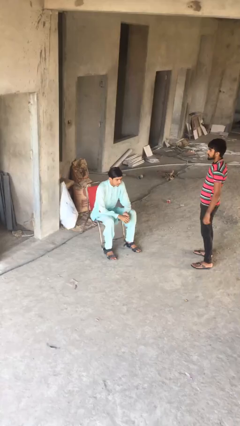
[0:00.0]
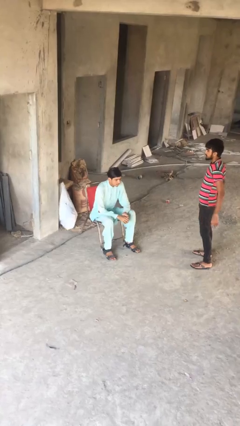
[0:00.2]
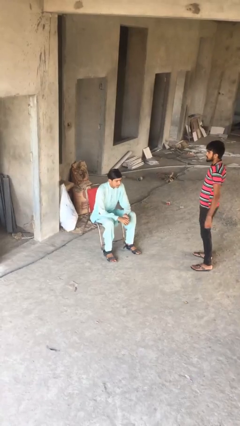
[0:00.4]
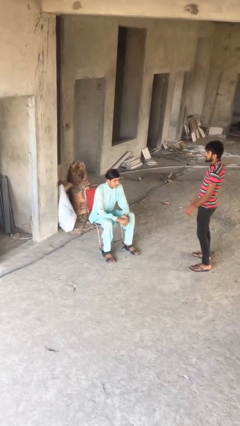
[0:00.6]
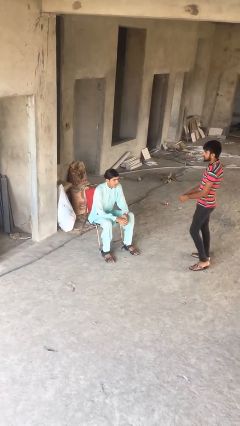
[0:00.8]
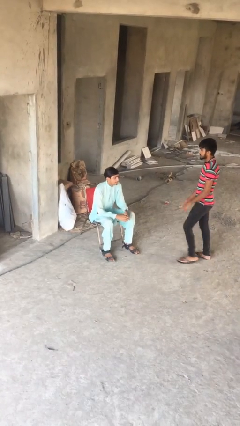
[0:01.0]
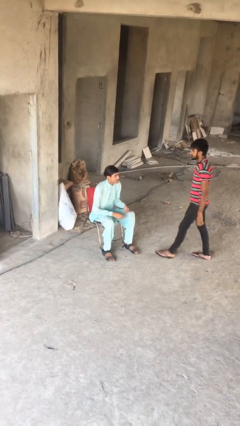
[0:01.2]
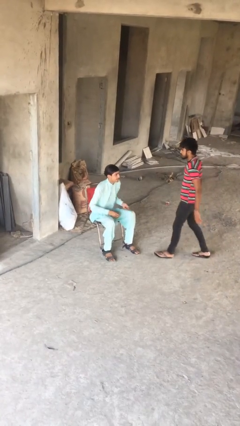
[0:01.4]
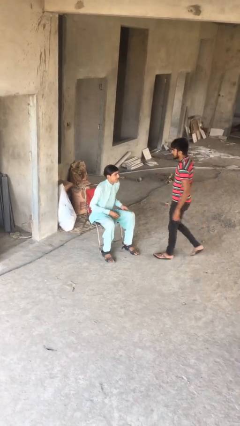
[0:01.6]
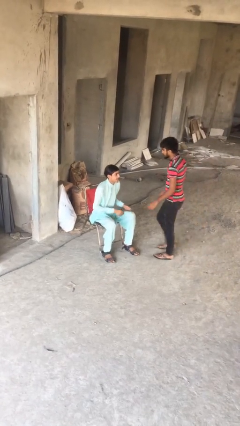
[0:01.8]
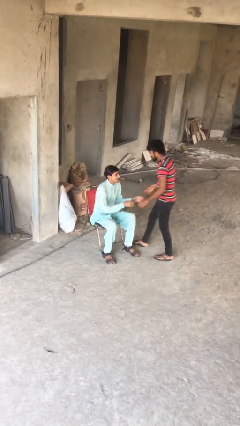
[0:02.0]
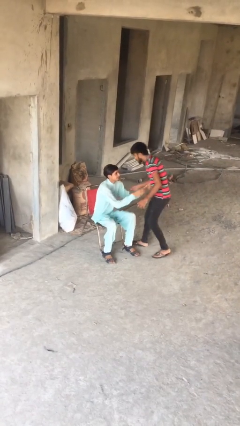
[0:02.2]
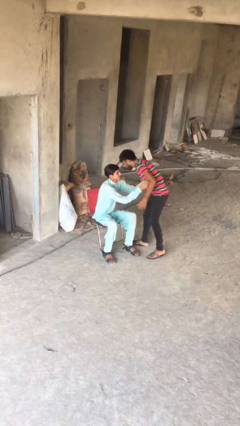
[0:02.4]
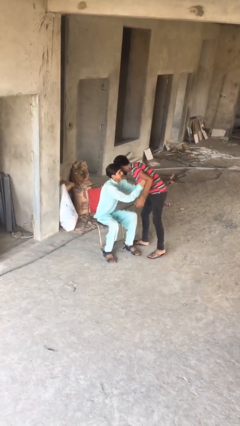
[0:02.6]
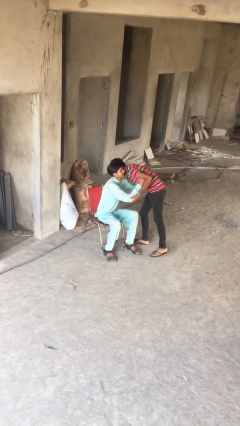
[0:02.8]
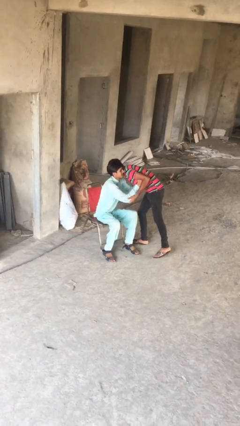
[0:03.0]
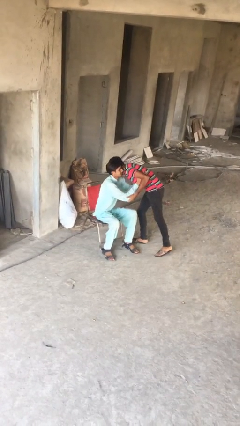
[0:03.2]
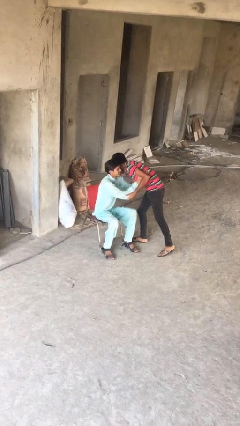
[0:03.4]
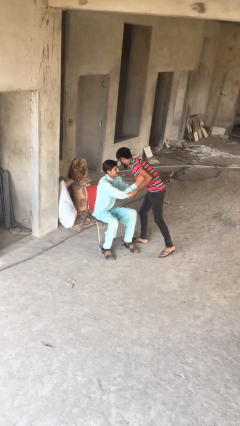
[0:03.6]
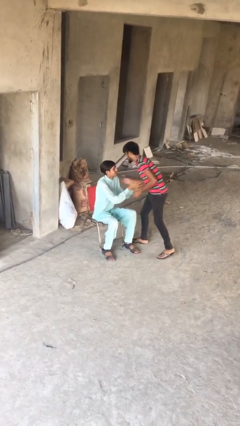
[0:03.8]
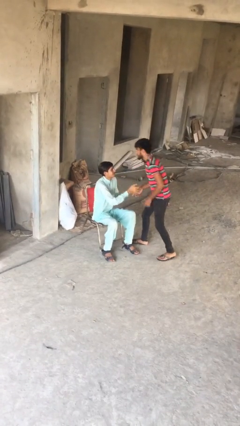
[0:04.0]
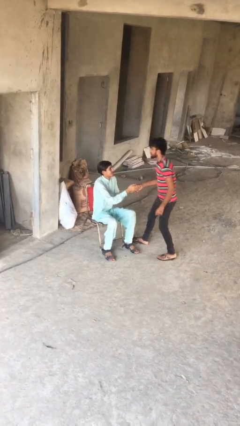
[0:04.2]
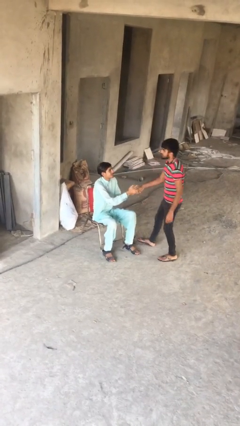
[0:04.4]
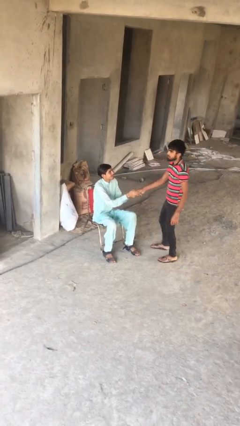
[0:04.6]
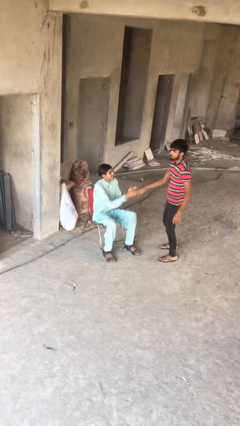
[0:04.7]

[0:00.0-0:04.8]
person embraces person

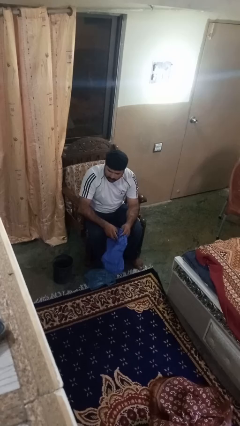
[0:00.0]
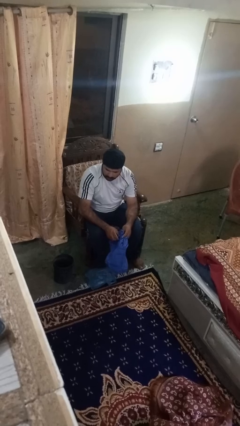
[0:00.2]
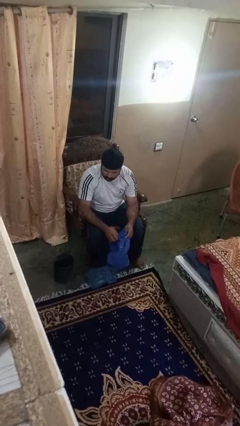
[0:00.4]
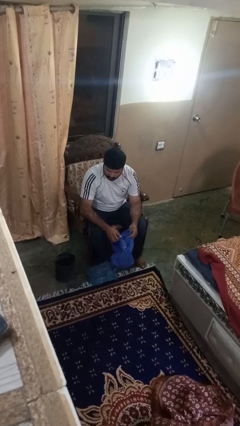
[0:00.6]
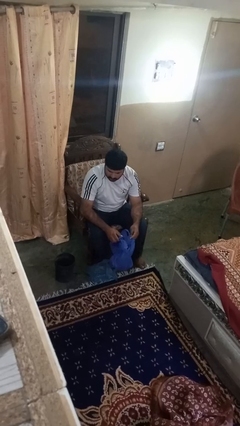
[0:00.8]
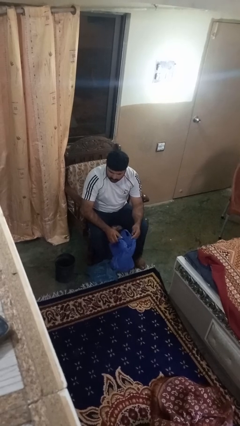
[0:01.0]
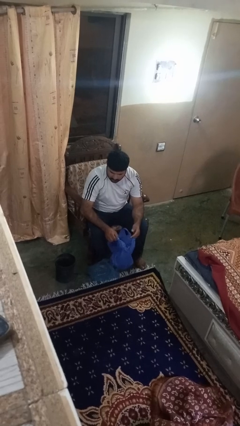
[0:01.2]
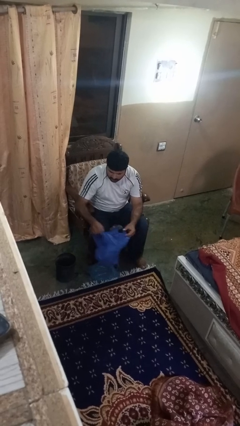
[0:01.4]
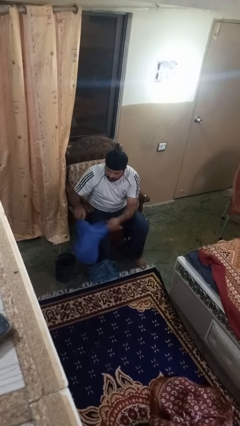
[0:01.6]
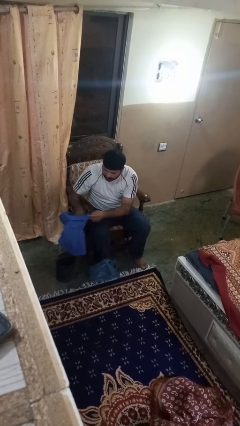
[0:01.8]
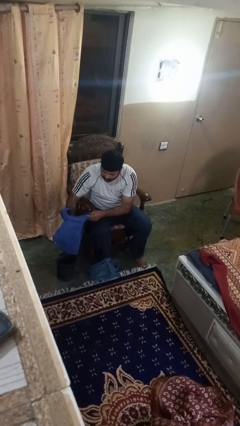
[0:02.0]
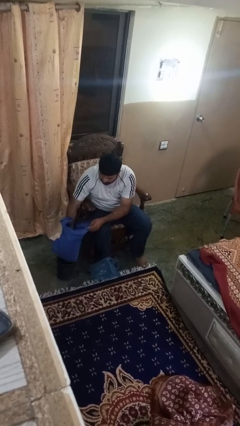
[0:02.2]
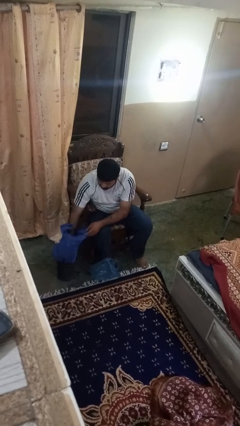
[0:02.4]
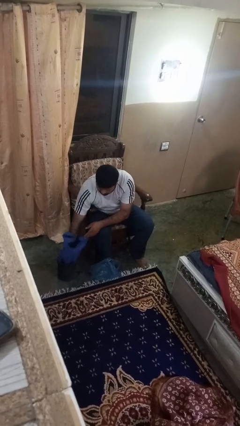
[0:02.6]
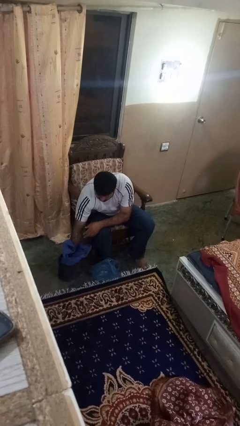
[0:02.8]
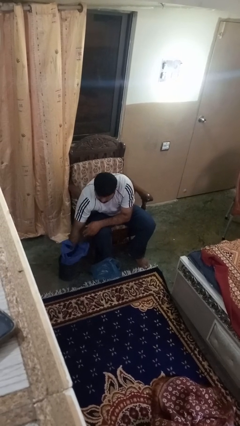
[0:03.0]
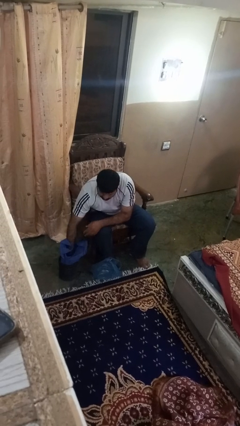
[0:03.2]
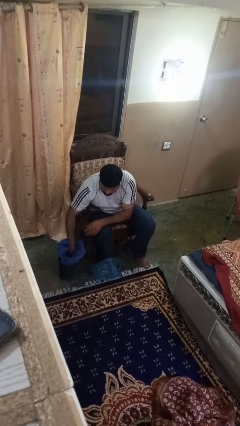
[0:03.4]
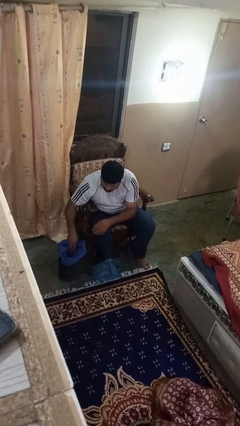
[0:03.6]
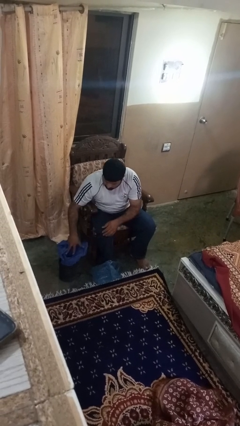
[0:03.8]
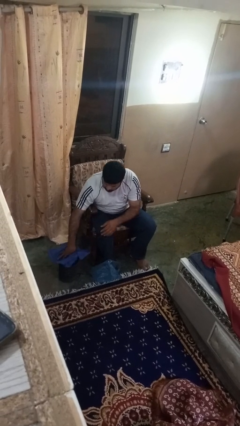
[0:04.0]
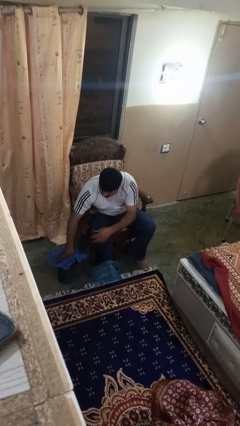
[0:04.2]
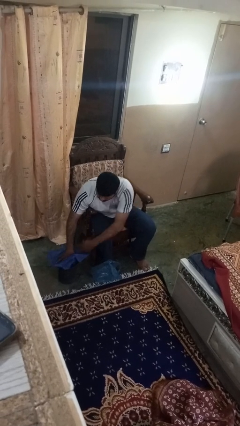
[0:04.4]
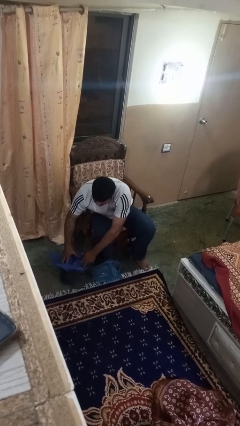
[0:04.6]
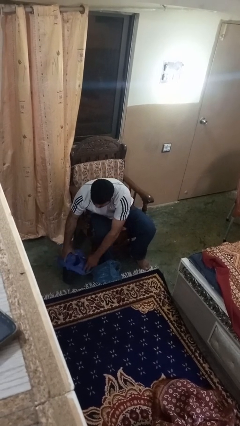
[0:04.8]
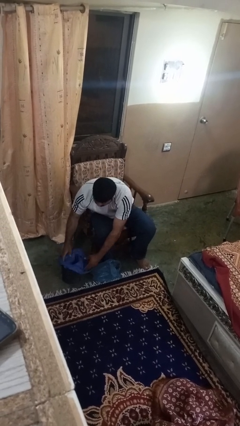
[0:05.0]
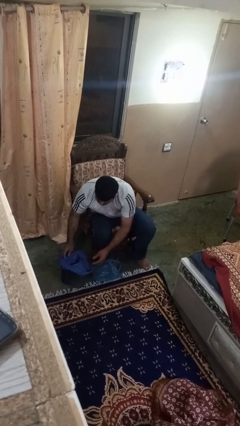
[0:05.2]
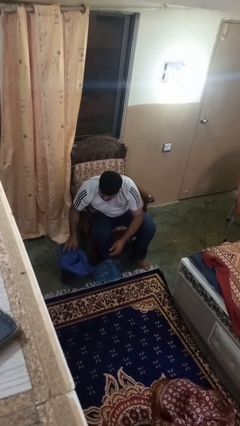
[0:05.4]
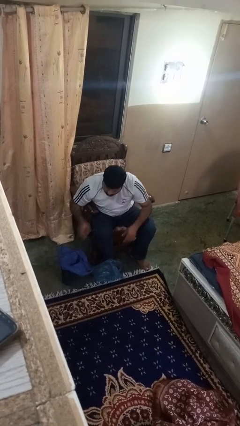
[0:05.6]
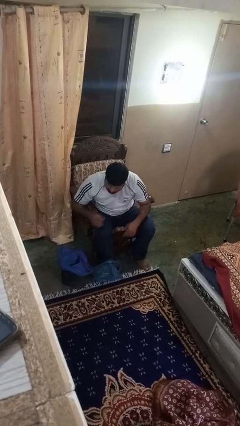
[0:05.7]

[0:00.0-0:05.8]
person inserts trashbag into trashcan

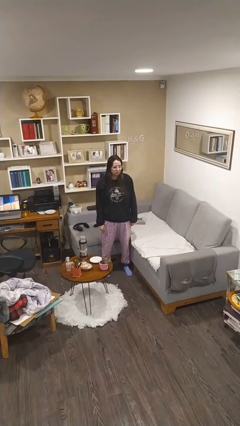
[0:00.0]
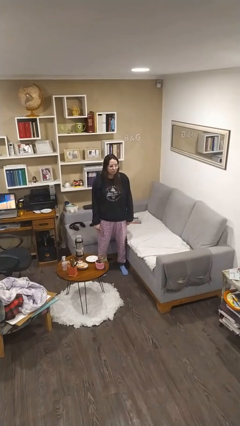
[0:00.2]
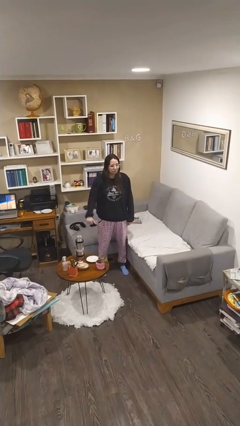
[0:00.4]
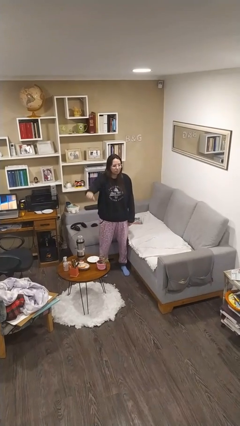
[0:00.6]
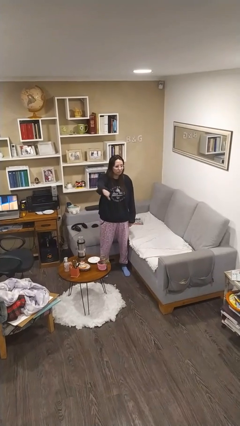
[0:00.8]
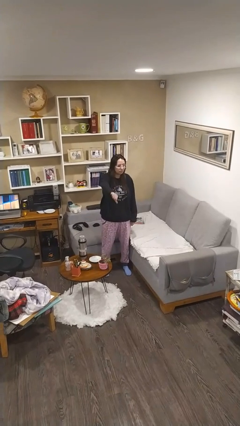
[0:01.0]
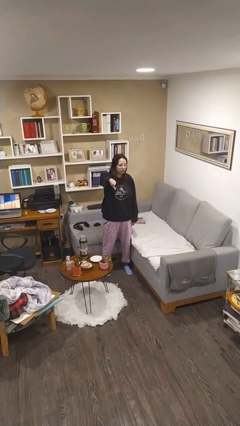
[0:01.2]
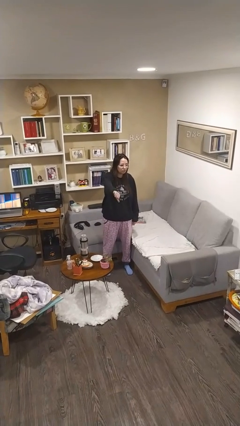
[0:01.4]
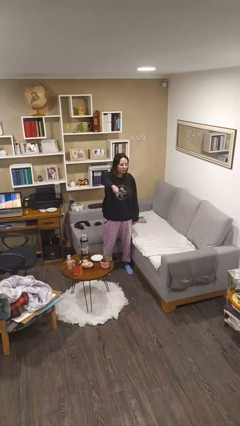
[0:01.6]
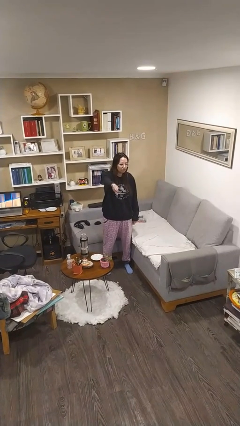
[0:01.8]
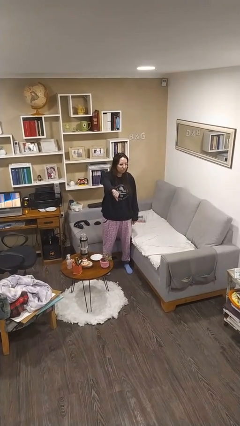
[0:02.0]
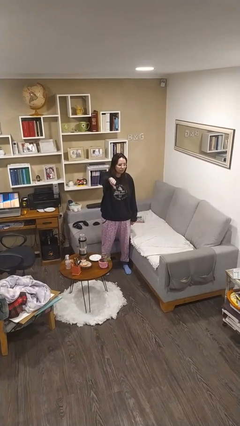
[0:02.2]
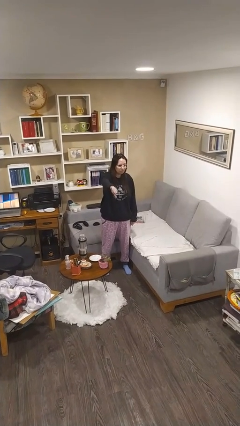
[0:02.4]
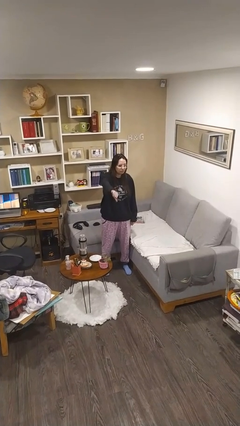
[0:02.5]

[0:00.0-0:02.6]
person gestures thumbs down

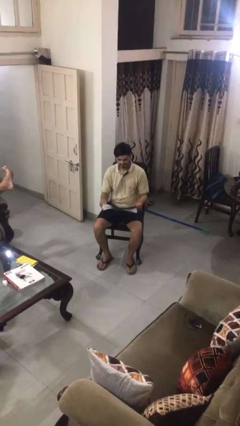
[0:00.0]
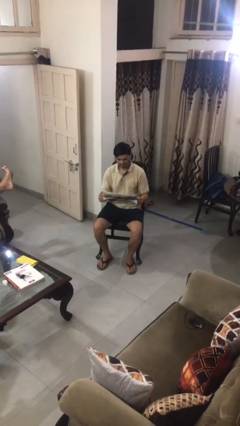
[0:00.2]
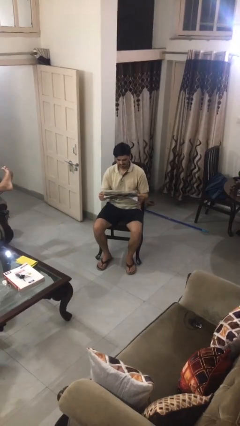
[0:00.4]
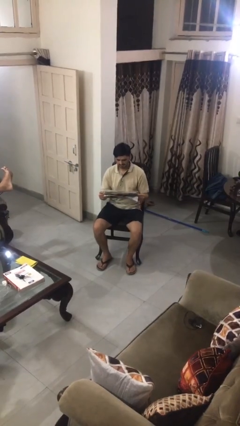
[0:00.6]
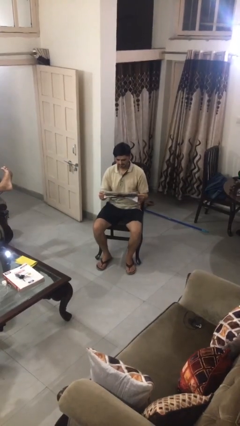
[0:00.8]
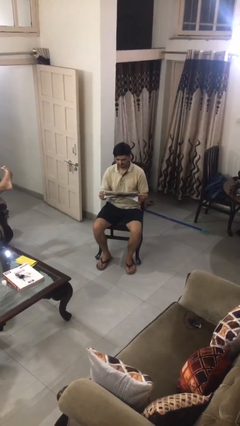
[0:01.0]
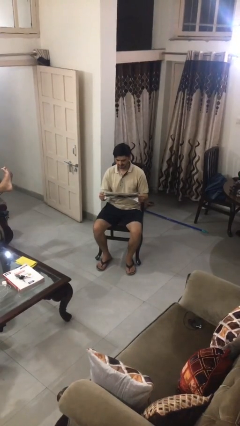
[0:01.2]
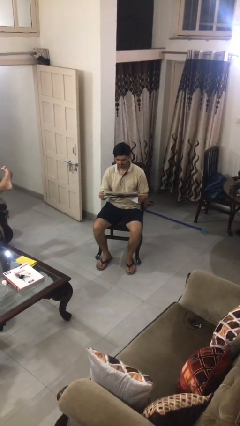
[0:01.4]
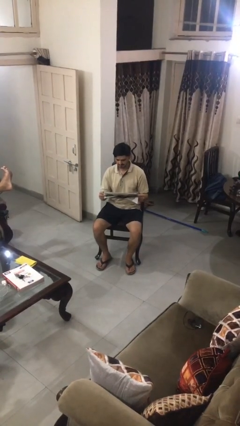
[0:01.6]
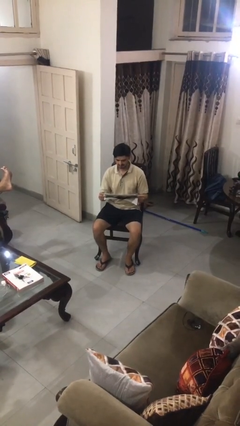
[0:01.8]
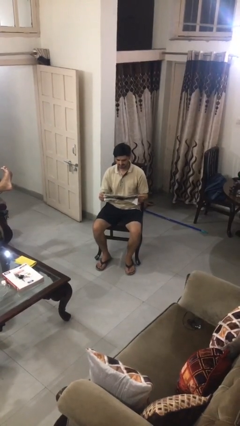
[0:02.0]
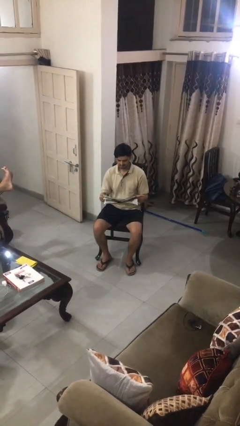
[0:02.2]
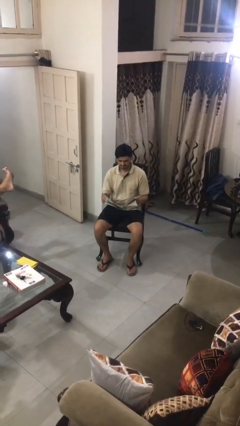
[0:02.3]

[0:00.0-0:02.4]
person reads newspaper

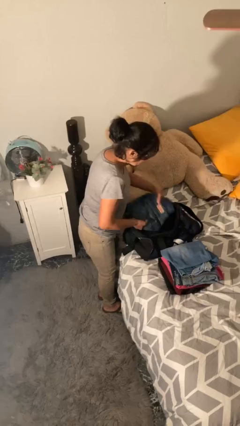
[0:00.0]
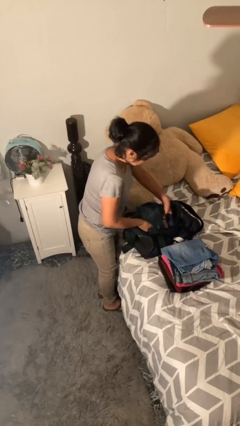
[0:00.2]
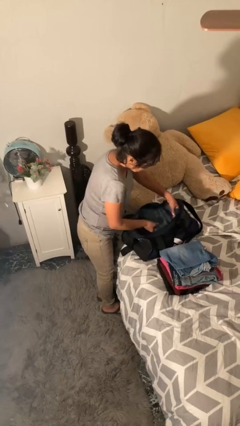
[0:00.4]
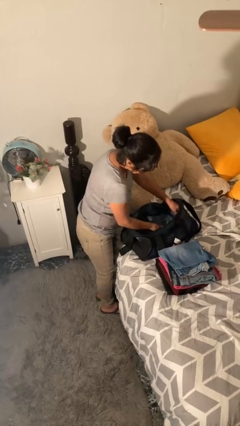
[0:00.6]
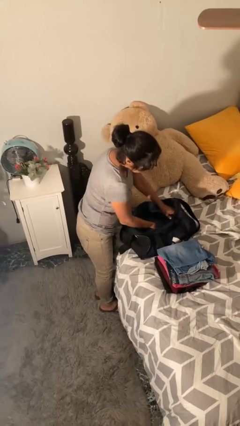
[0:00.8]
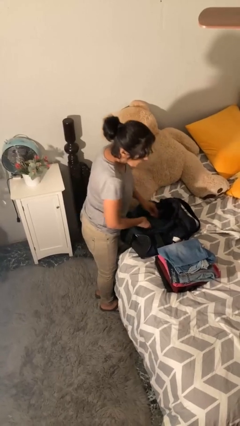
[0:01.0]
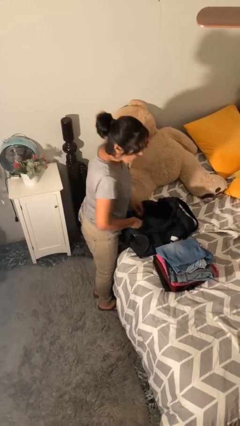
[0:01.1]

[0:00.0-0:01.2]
person loads clothes into suitcase

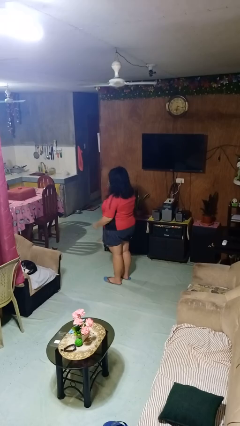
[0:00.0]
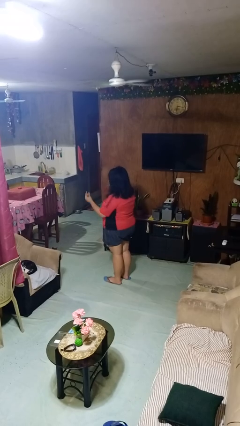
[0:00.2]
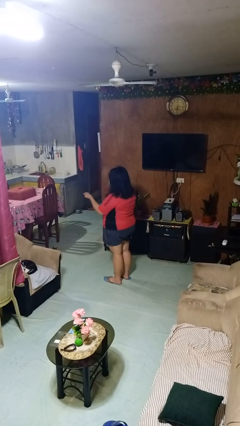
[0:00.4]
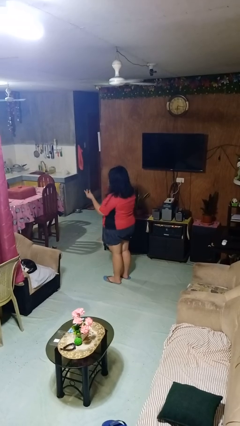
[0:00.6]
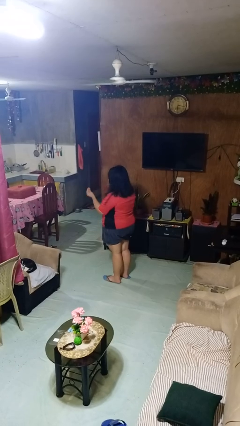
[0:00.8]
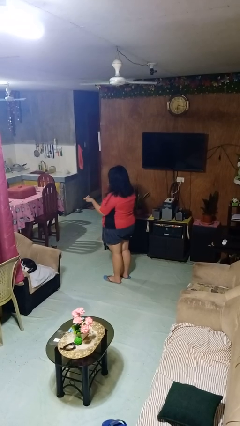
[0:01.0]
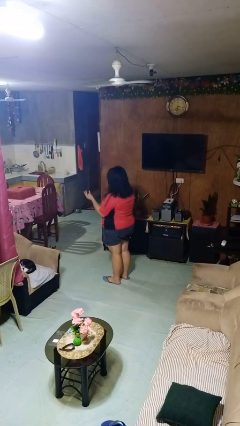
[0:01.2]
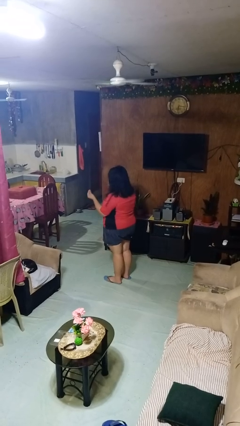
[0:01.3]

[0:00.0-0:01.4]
person snaps fingers
